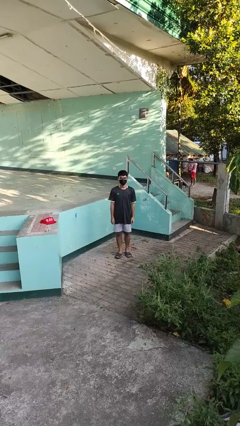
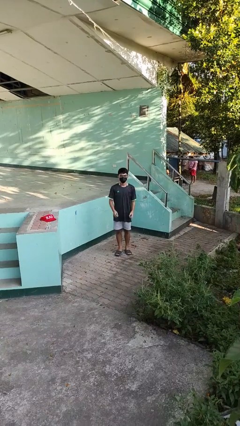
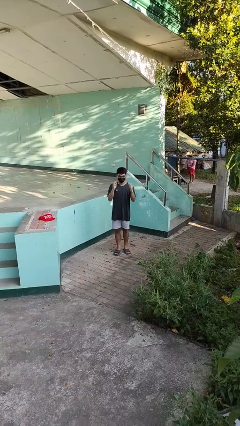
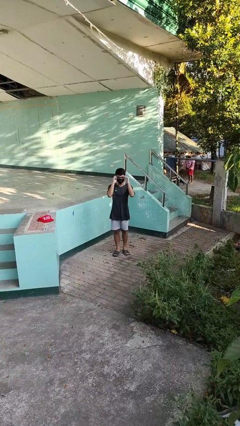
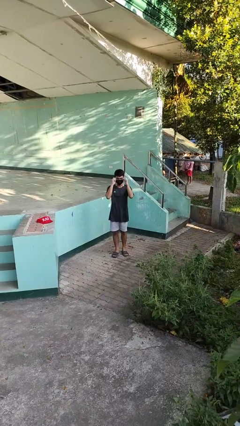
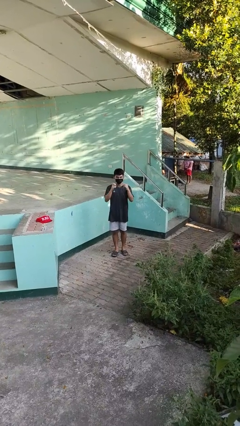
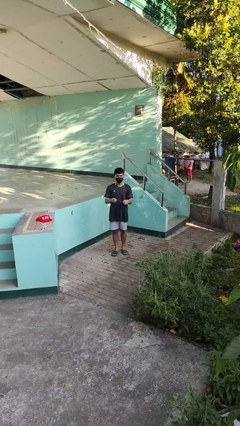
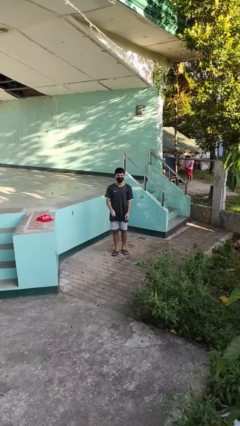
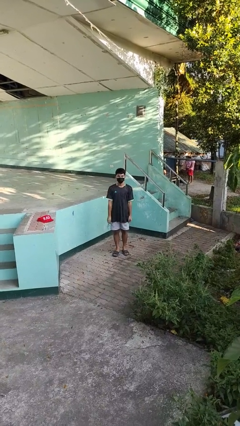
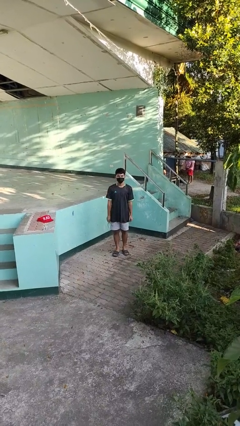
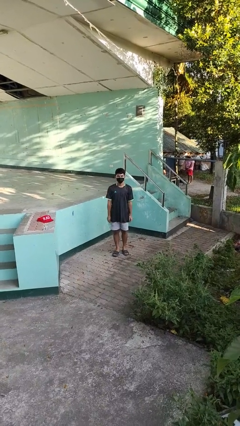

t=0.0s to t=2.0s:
person takes off glasses

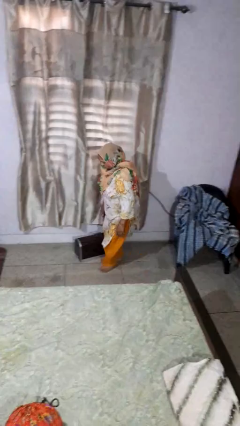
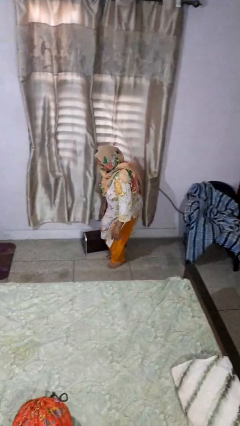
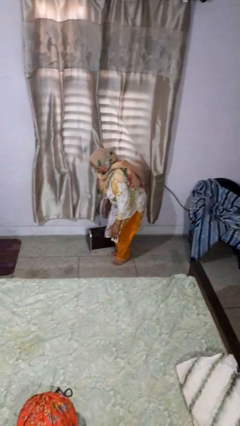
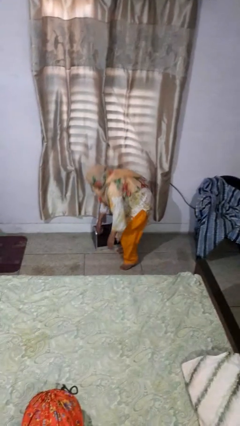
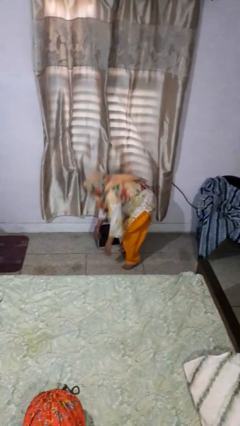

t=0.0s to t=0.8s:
person trips on object on floor

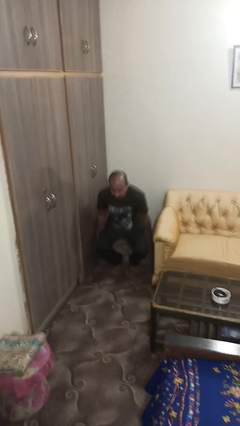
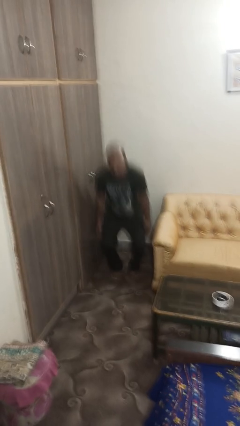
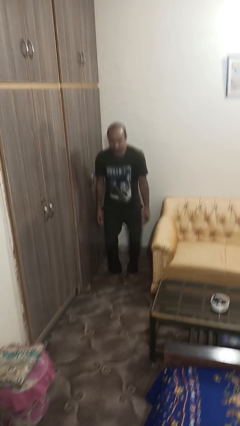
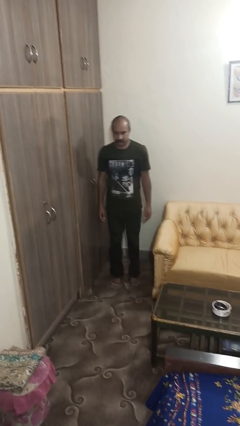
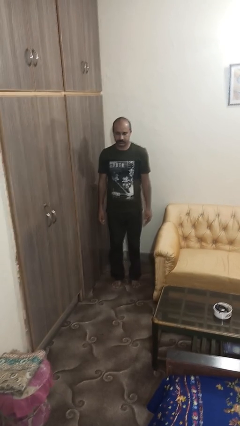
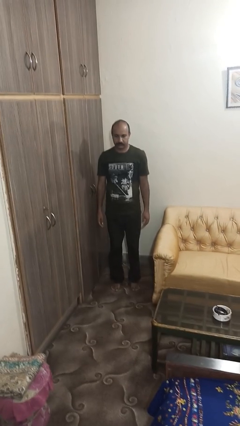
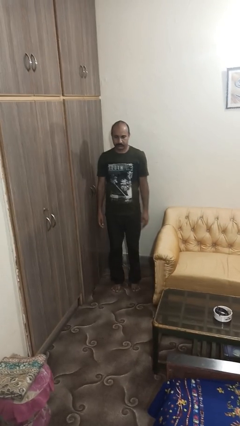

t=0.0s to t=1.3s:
person stands up

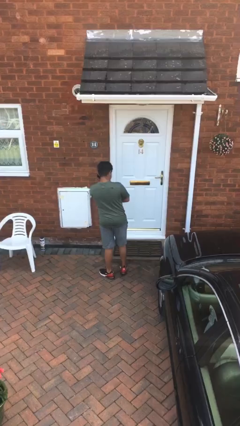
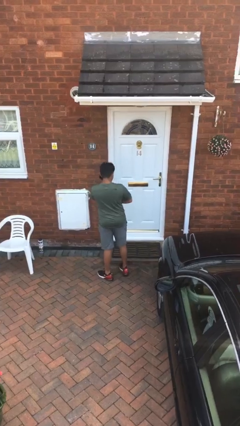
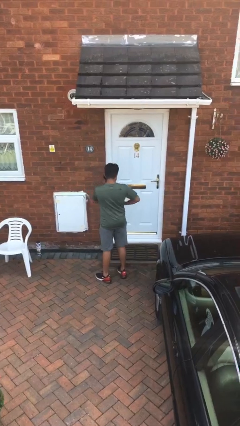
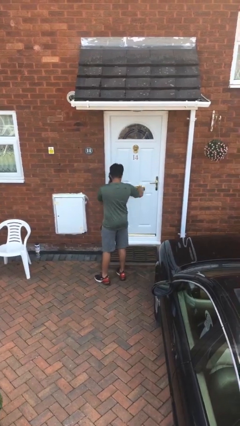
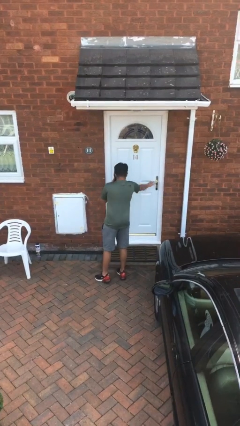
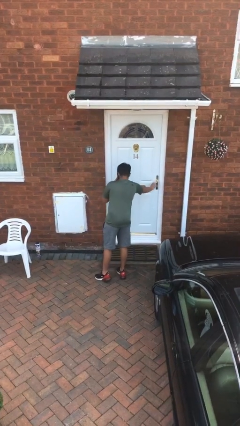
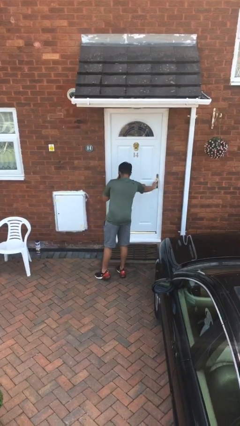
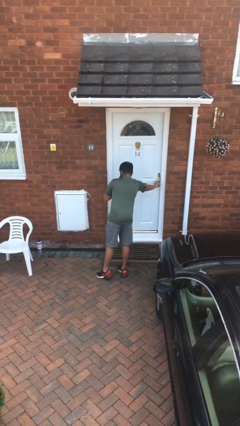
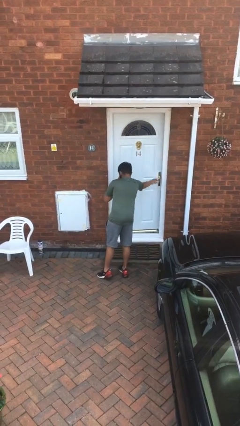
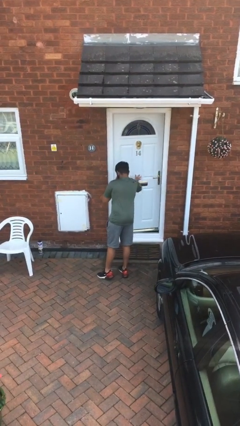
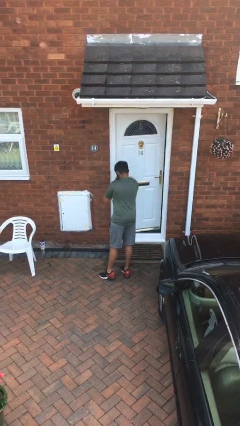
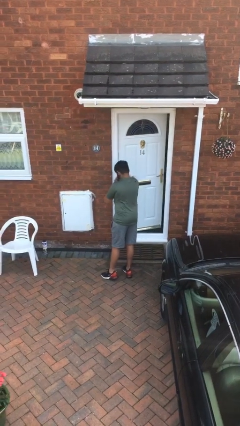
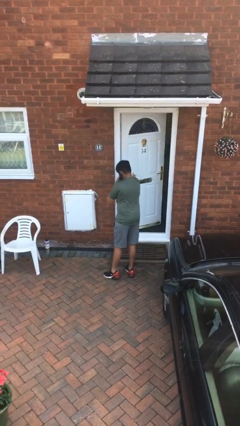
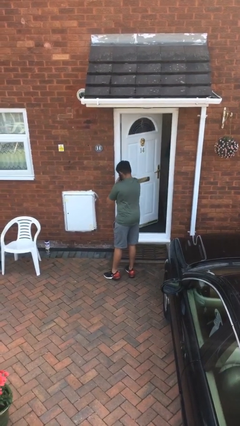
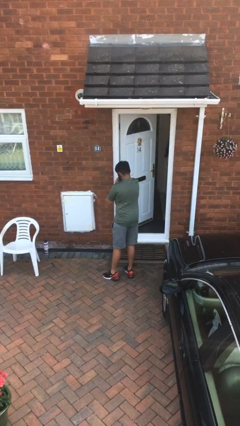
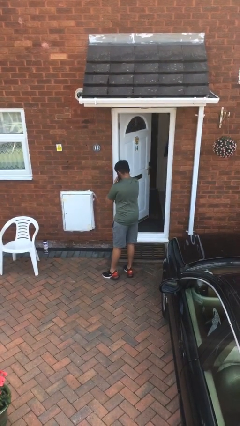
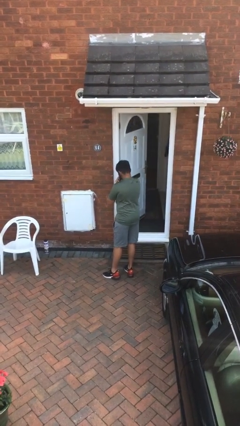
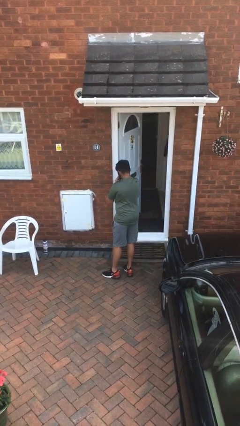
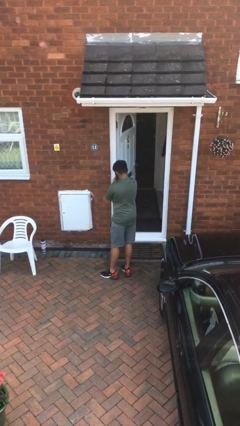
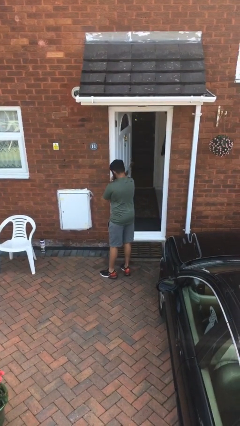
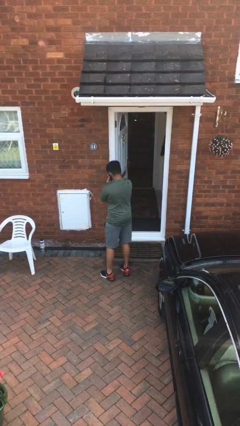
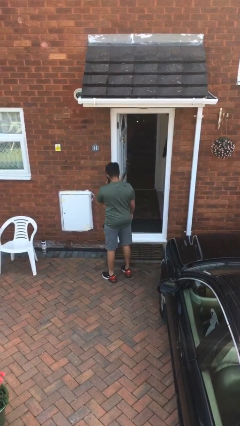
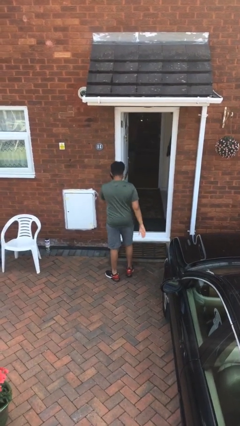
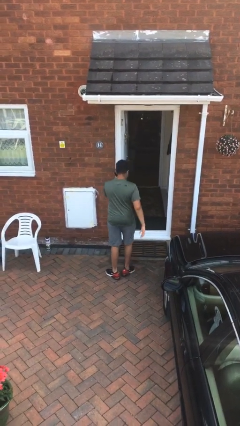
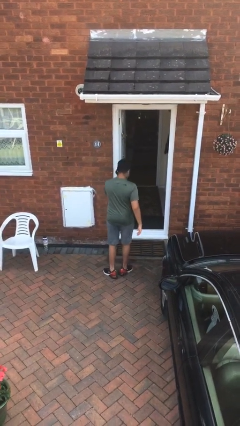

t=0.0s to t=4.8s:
person opens facility door

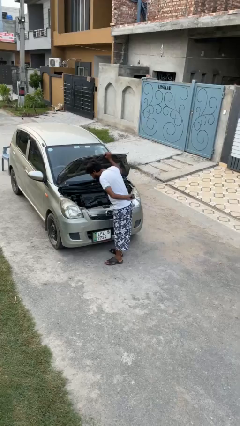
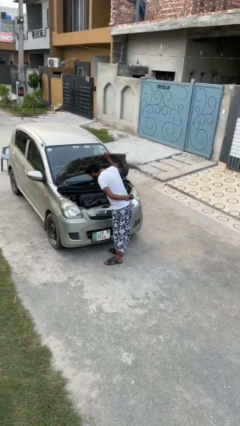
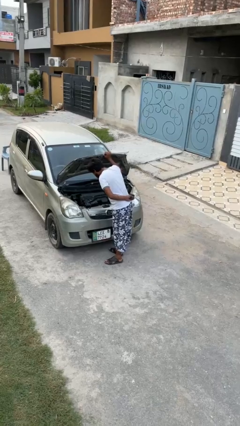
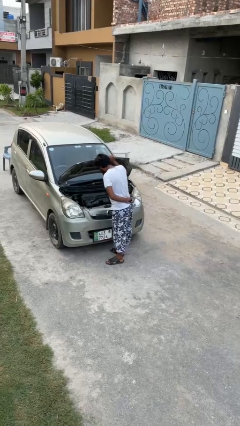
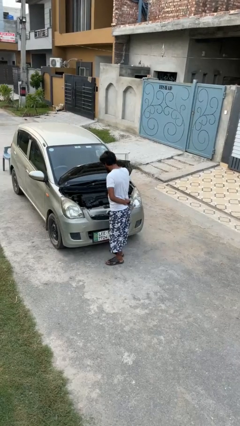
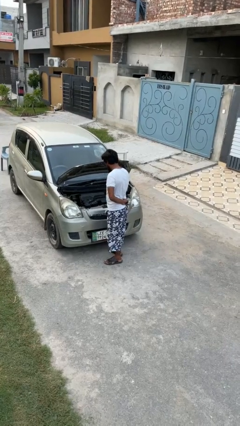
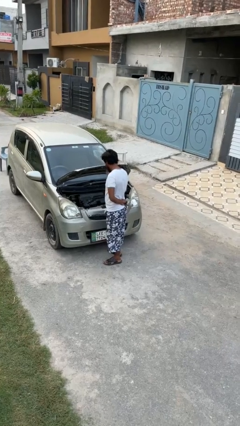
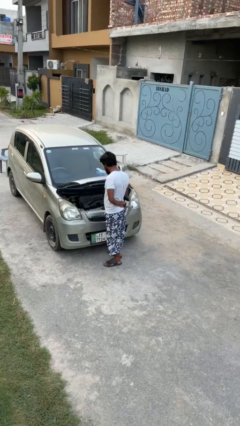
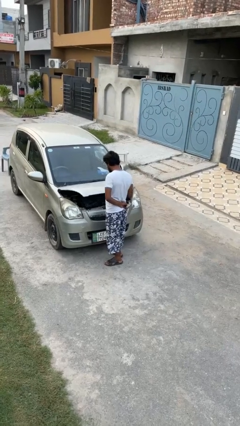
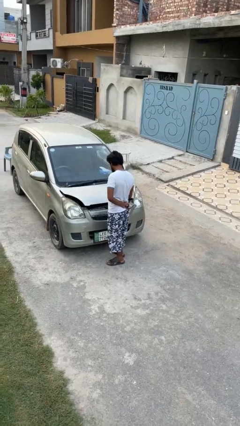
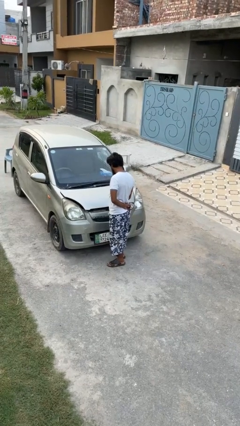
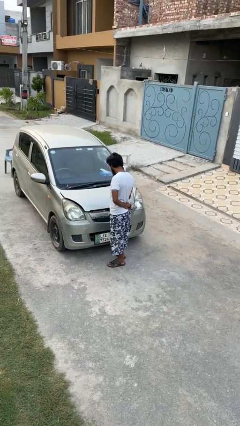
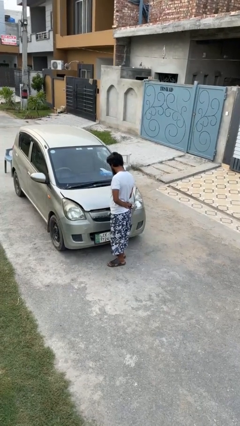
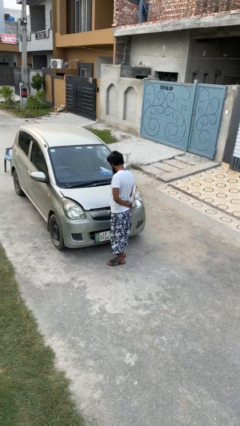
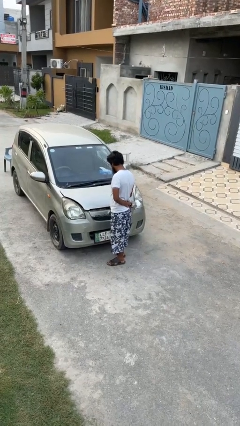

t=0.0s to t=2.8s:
person closes car hood

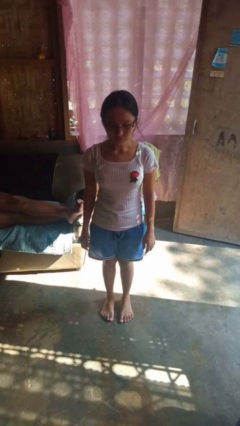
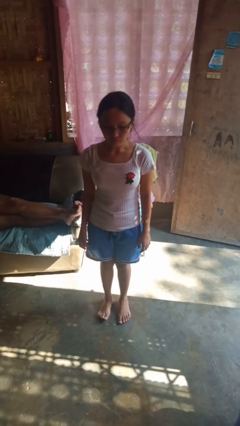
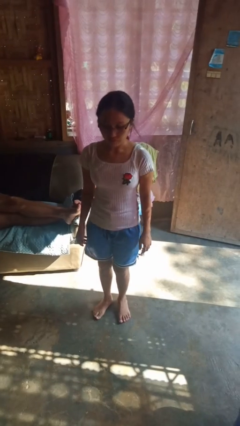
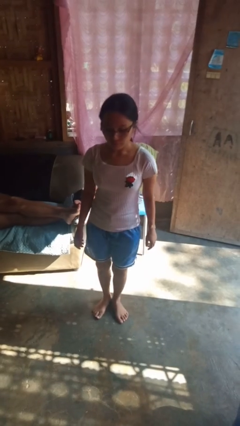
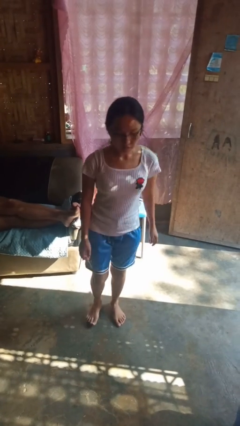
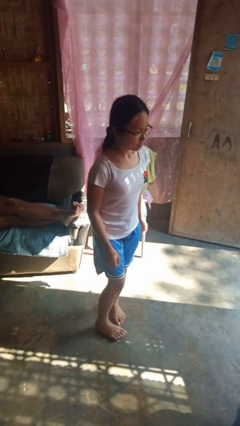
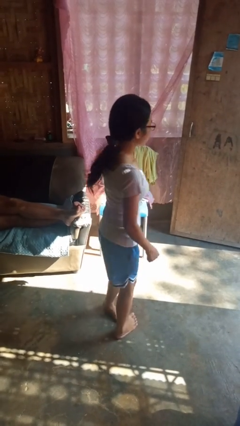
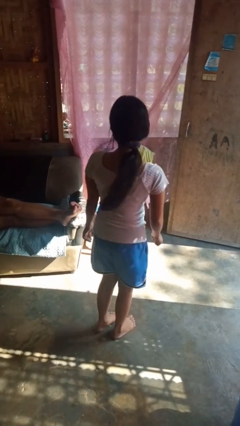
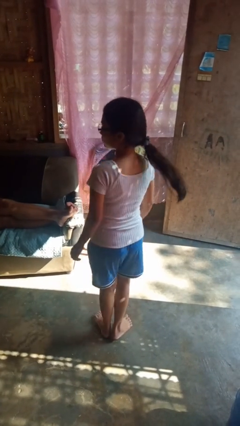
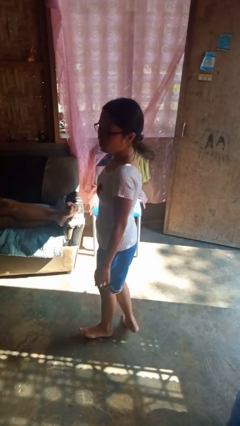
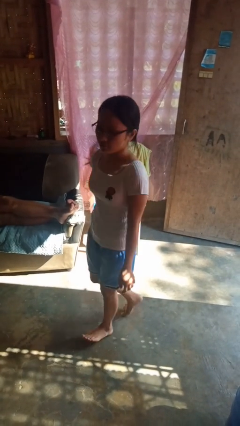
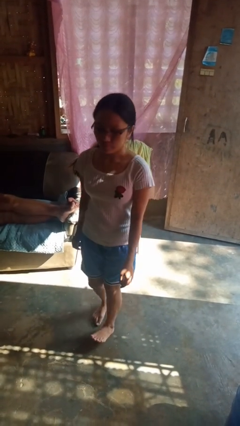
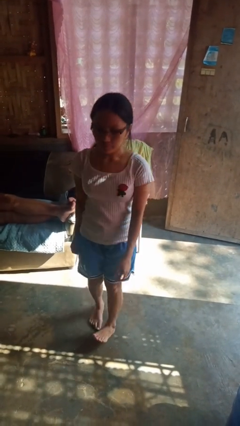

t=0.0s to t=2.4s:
person twirls

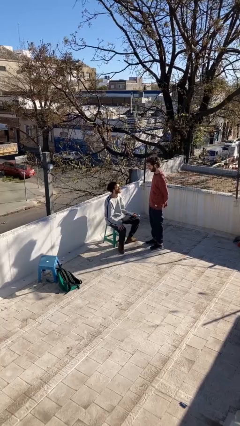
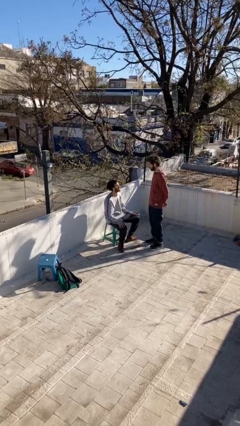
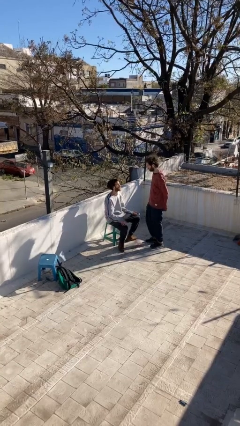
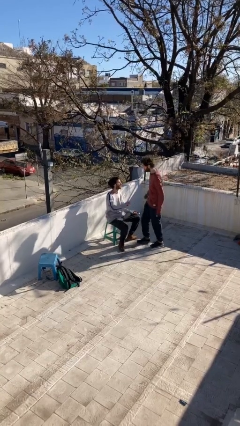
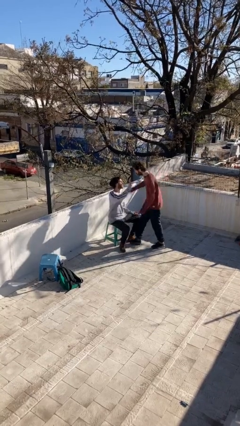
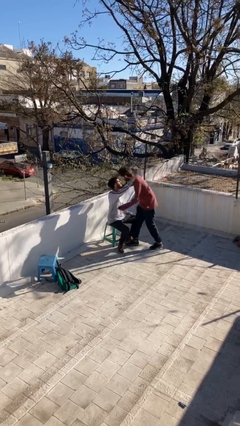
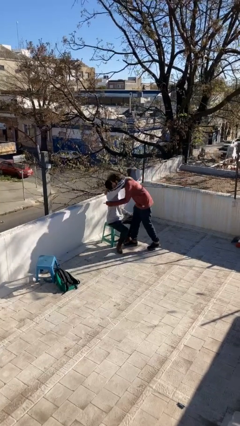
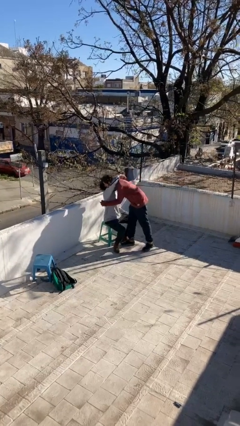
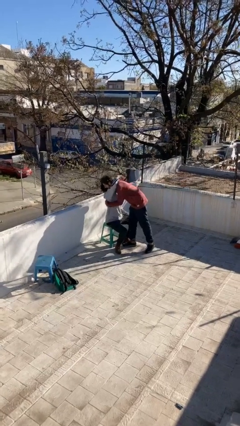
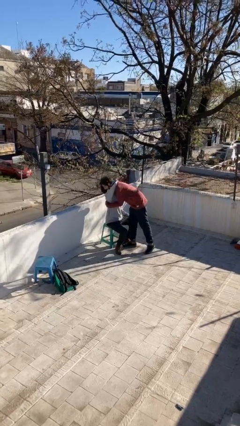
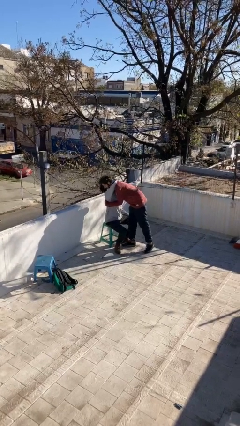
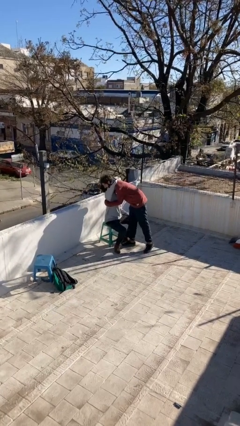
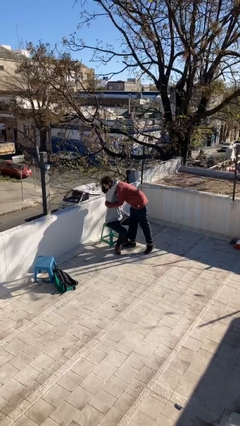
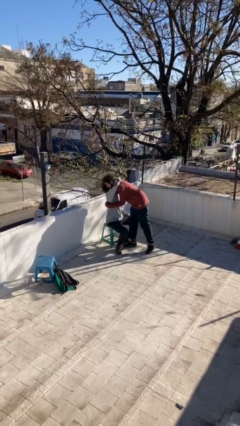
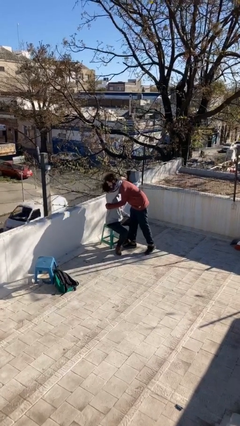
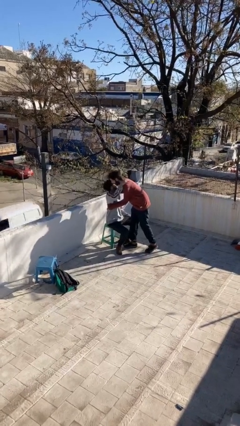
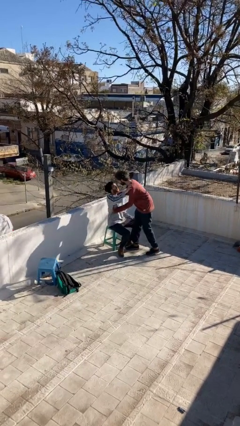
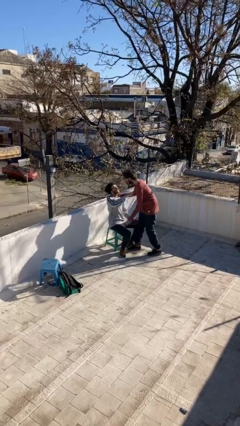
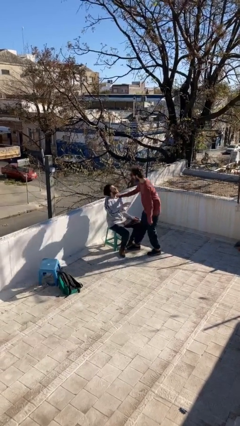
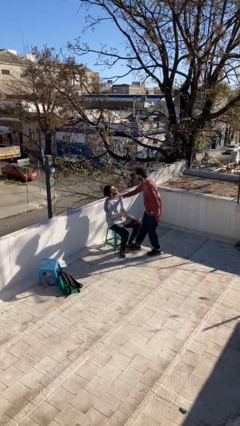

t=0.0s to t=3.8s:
person embraces person
